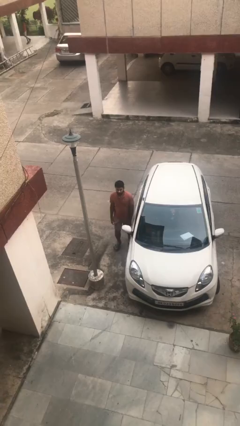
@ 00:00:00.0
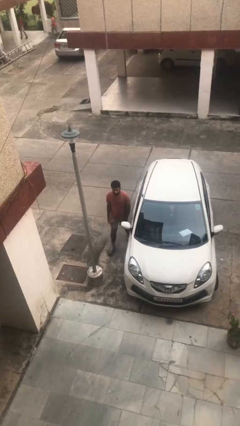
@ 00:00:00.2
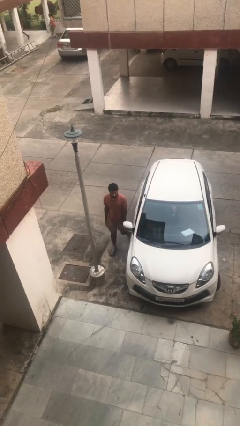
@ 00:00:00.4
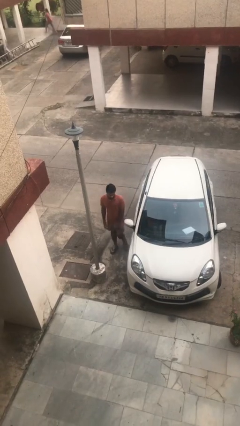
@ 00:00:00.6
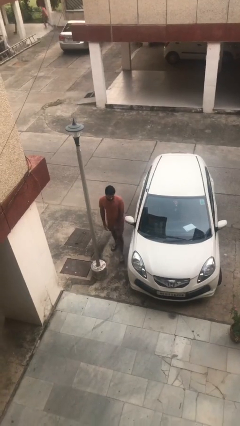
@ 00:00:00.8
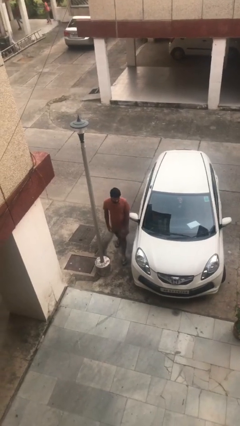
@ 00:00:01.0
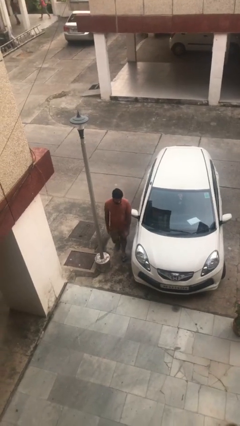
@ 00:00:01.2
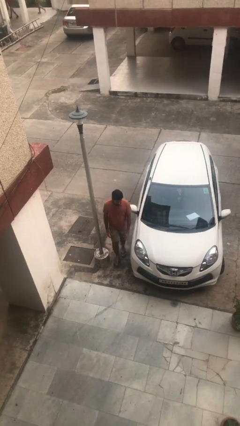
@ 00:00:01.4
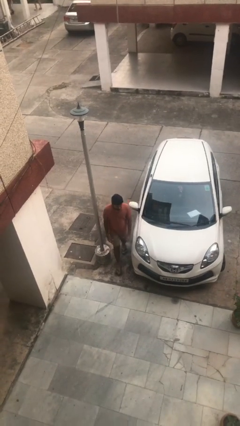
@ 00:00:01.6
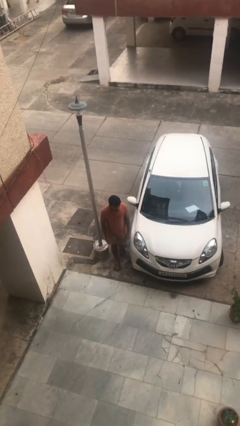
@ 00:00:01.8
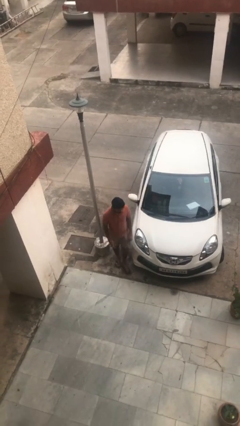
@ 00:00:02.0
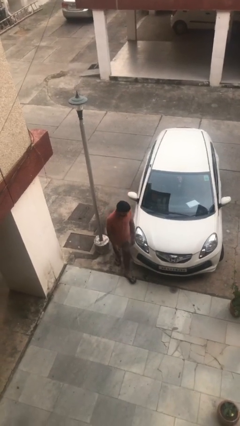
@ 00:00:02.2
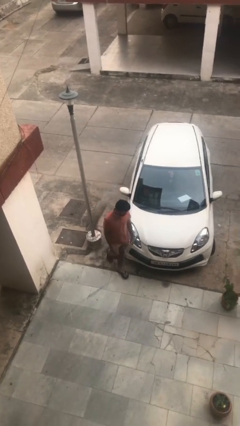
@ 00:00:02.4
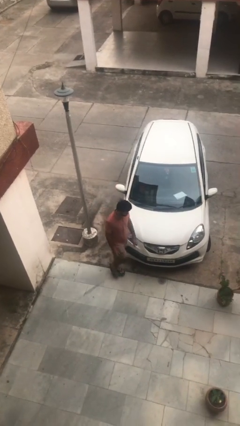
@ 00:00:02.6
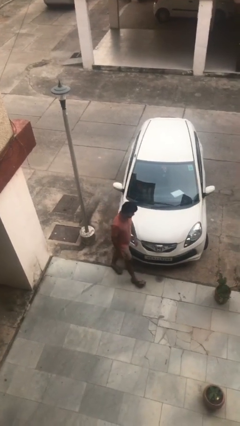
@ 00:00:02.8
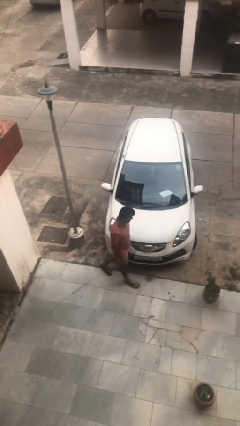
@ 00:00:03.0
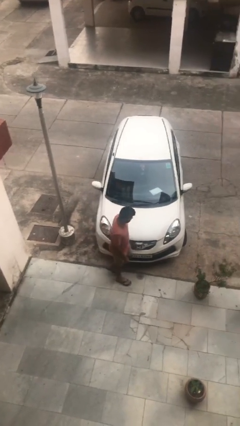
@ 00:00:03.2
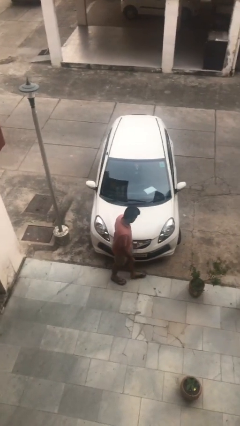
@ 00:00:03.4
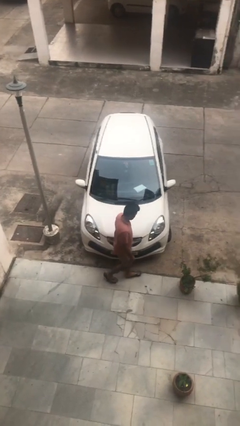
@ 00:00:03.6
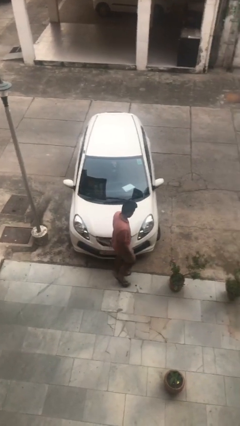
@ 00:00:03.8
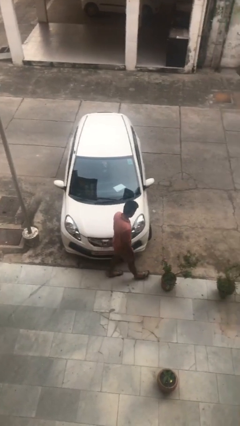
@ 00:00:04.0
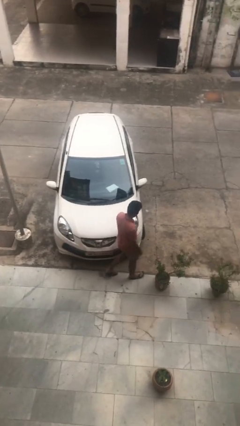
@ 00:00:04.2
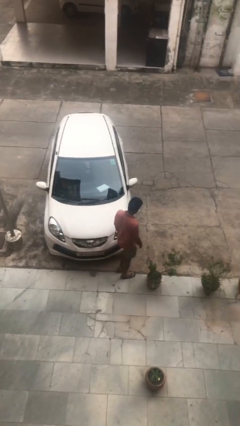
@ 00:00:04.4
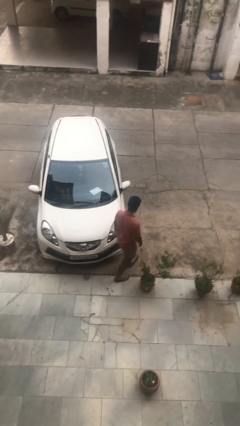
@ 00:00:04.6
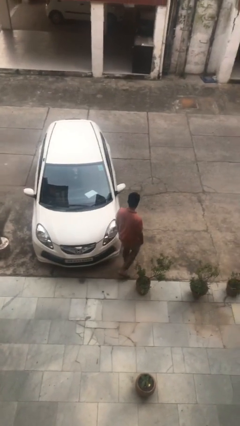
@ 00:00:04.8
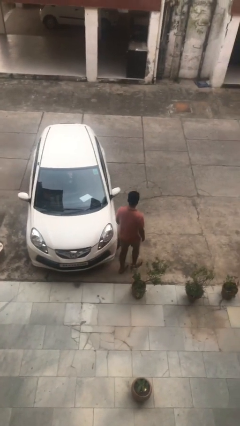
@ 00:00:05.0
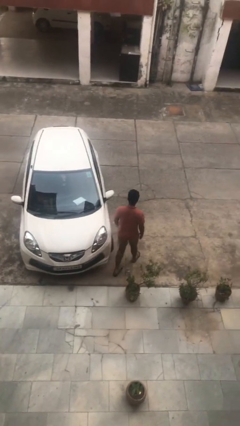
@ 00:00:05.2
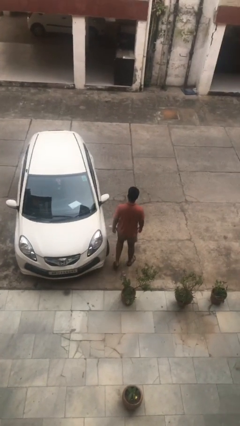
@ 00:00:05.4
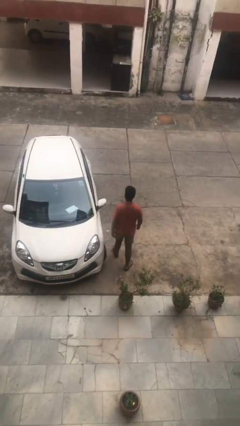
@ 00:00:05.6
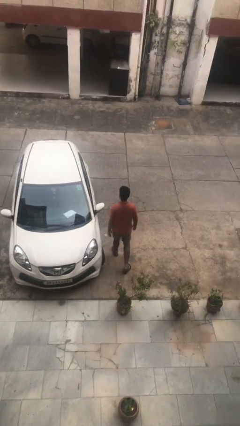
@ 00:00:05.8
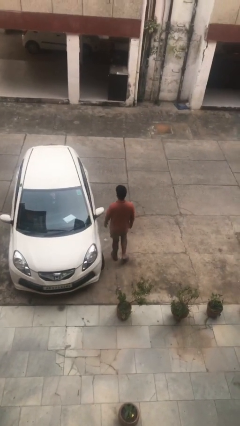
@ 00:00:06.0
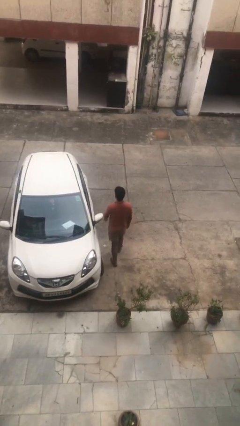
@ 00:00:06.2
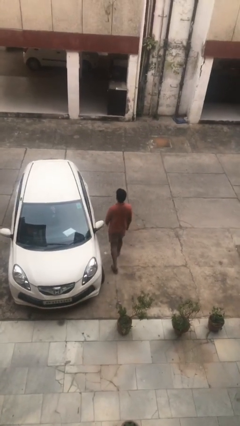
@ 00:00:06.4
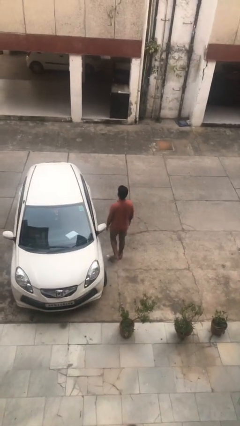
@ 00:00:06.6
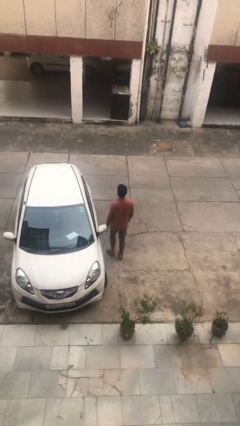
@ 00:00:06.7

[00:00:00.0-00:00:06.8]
person walks around car

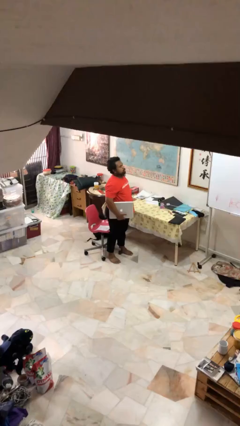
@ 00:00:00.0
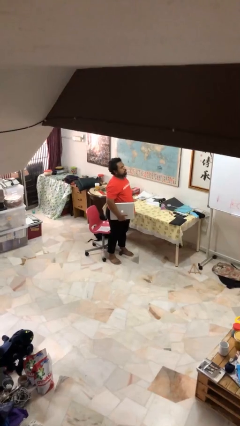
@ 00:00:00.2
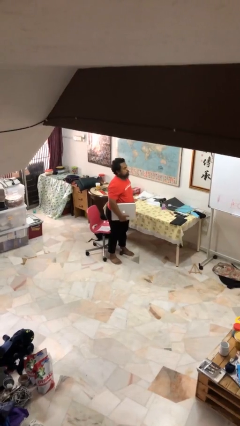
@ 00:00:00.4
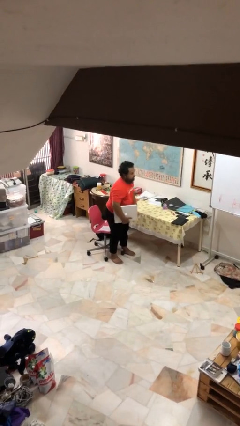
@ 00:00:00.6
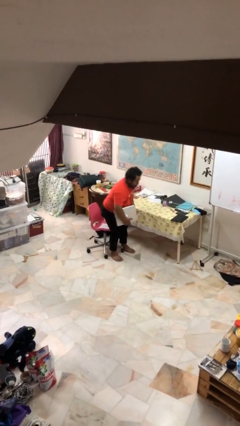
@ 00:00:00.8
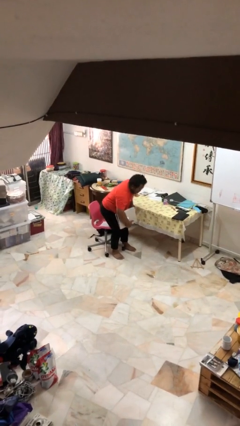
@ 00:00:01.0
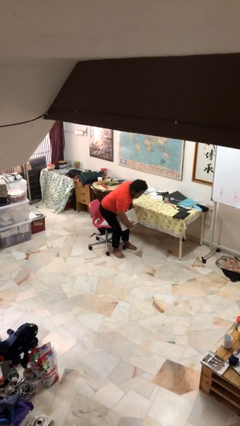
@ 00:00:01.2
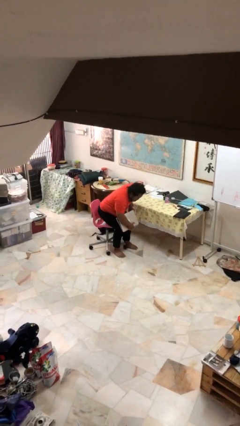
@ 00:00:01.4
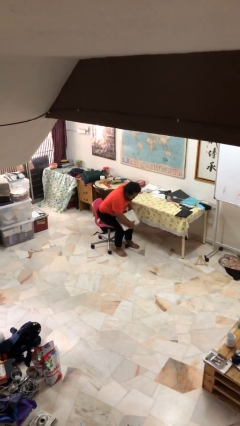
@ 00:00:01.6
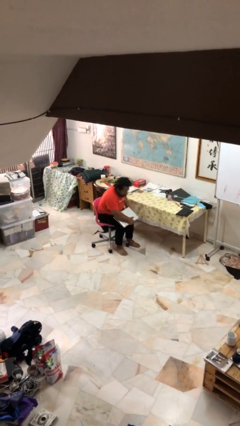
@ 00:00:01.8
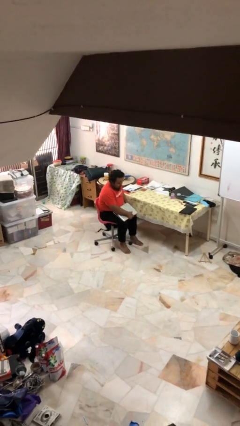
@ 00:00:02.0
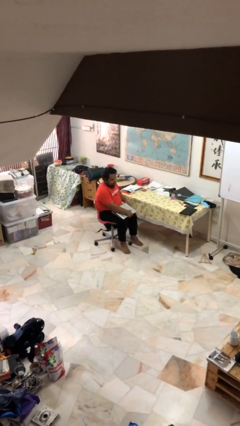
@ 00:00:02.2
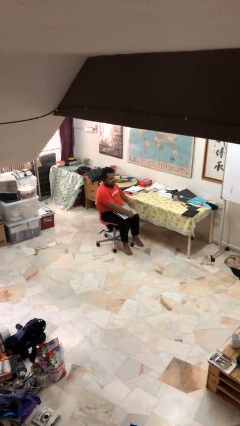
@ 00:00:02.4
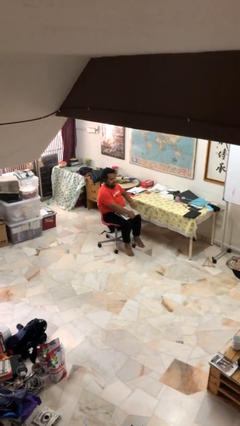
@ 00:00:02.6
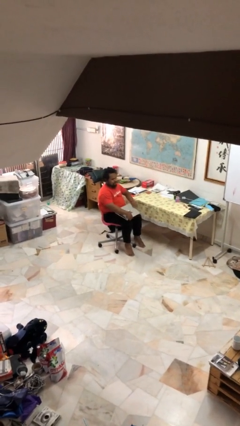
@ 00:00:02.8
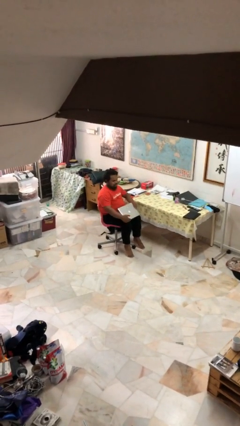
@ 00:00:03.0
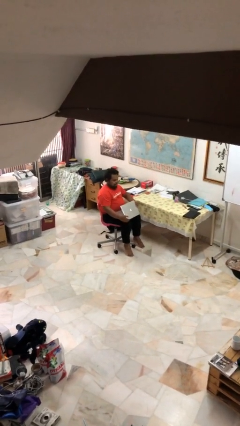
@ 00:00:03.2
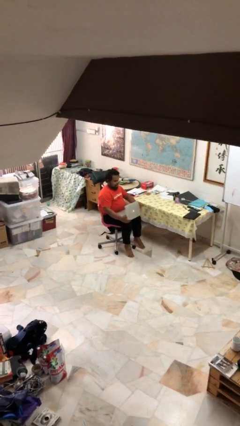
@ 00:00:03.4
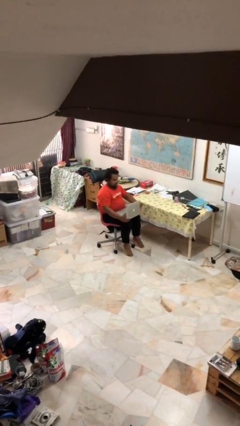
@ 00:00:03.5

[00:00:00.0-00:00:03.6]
person sits down

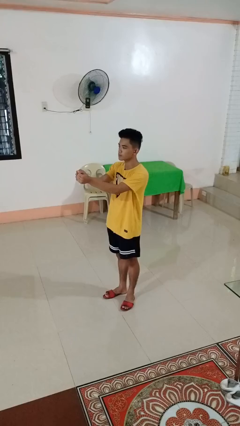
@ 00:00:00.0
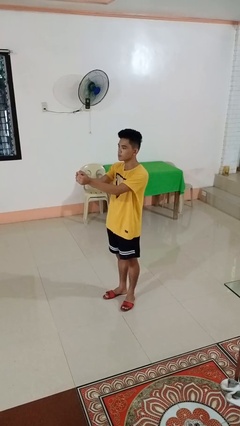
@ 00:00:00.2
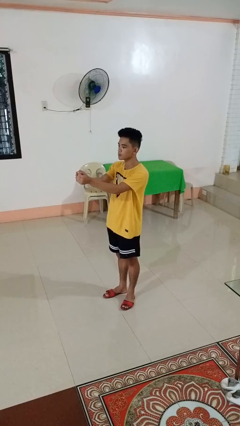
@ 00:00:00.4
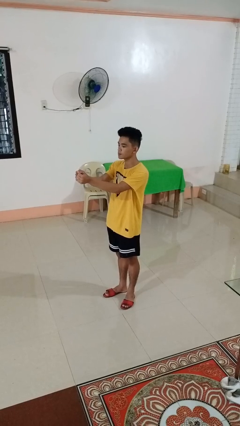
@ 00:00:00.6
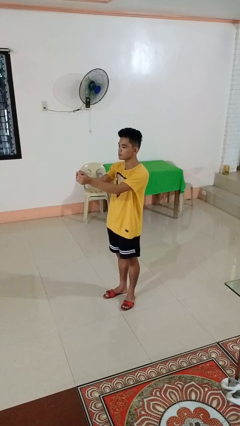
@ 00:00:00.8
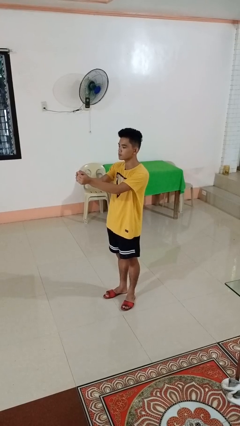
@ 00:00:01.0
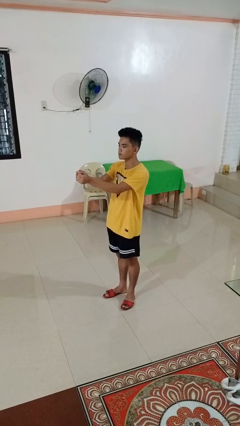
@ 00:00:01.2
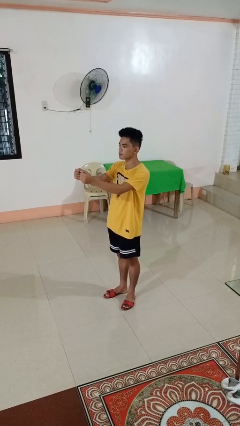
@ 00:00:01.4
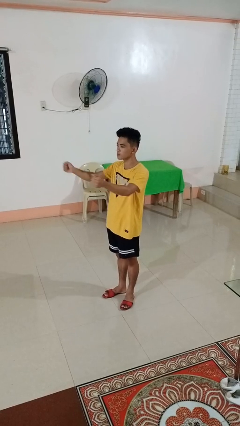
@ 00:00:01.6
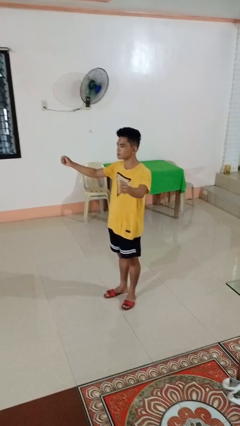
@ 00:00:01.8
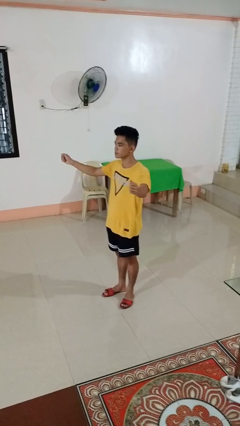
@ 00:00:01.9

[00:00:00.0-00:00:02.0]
person gestures zoom in

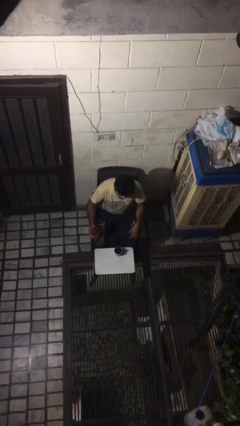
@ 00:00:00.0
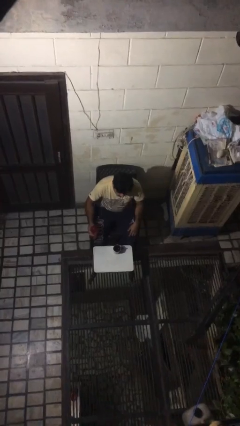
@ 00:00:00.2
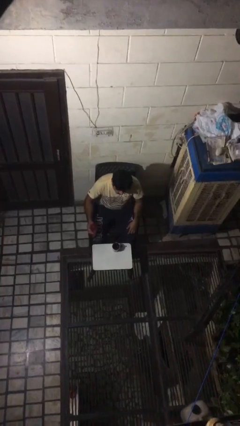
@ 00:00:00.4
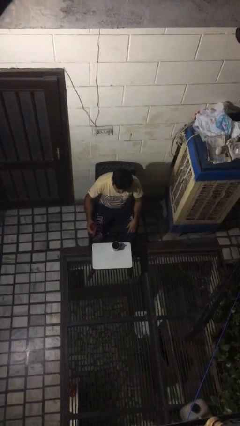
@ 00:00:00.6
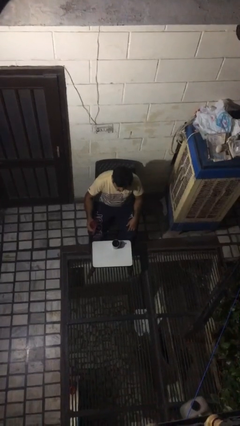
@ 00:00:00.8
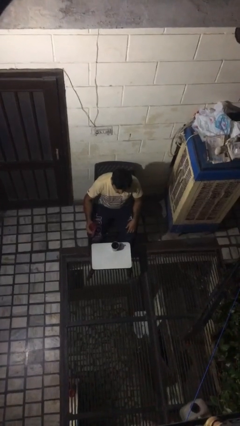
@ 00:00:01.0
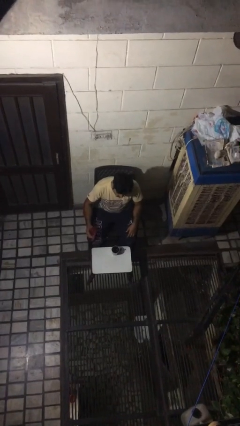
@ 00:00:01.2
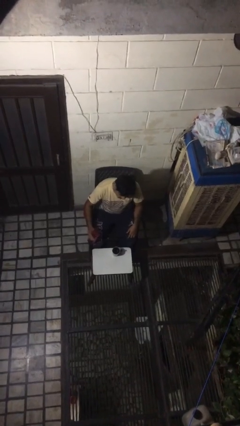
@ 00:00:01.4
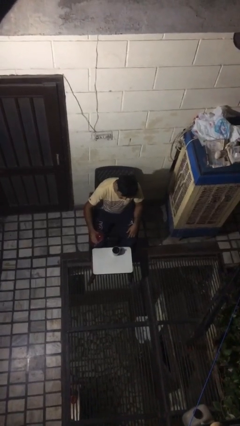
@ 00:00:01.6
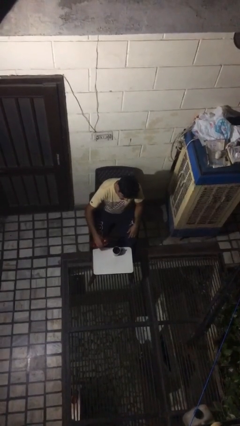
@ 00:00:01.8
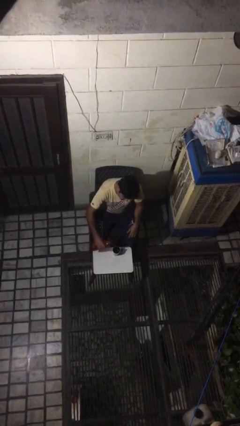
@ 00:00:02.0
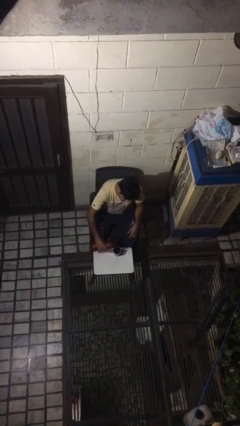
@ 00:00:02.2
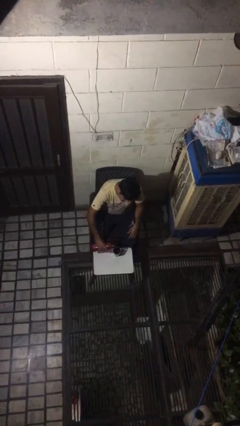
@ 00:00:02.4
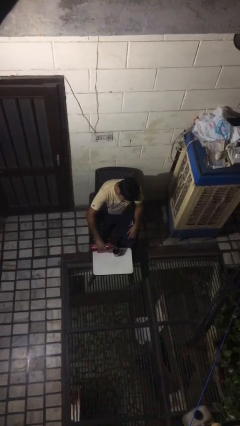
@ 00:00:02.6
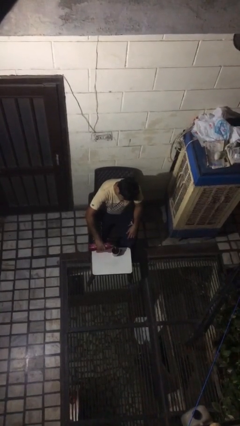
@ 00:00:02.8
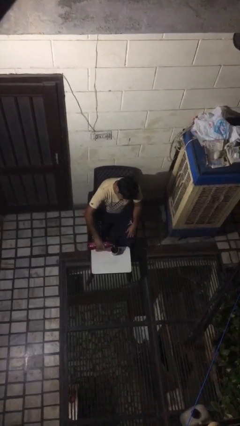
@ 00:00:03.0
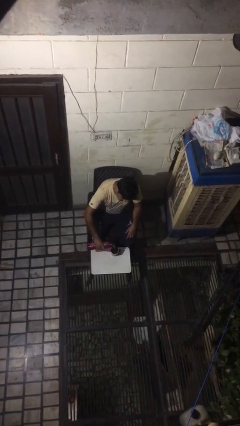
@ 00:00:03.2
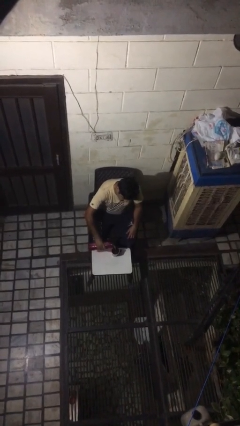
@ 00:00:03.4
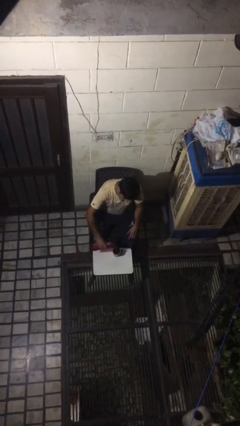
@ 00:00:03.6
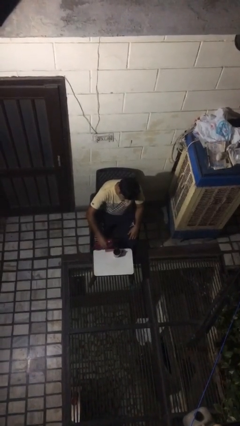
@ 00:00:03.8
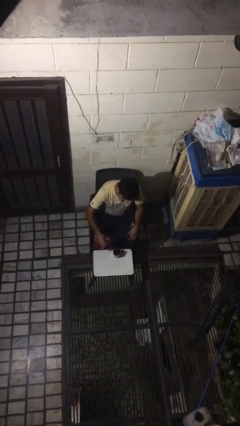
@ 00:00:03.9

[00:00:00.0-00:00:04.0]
person pours liquid into cup

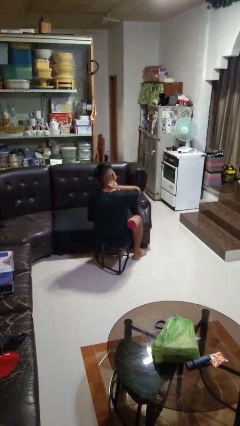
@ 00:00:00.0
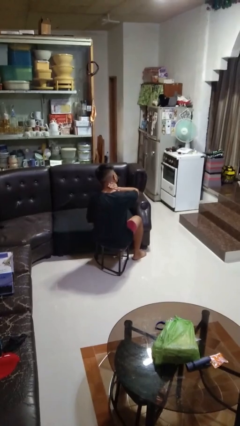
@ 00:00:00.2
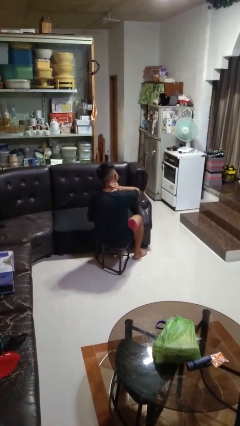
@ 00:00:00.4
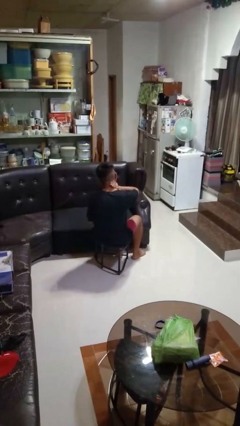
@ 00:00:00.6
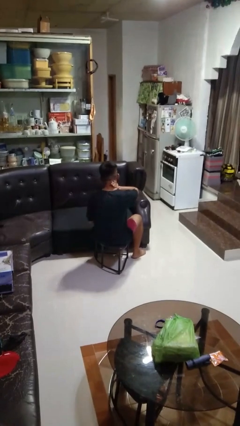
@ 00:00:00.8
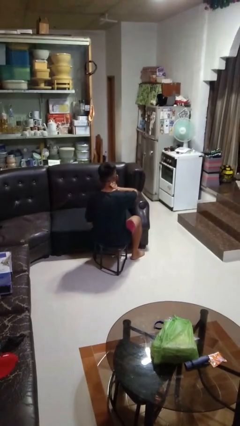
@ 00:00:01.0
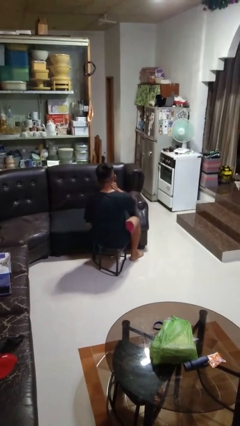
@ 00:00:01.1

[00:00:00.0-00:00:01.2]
person swats bug
